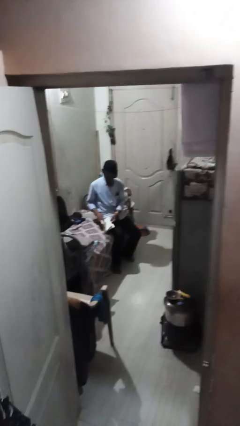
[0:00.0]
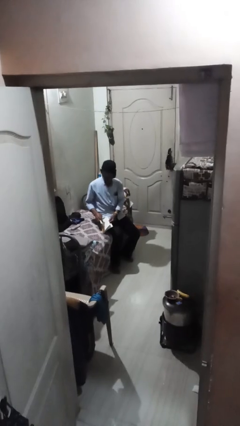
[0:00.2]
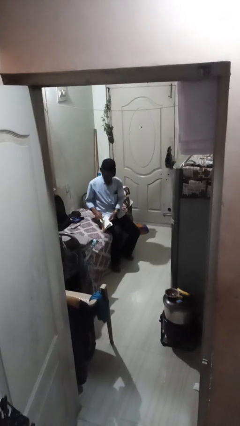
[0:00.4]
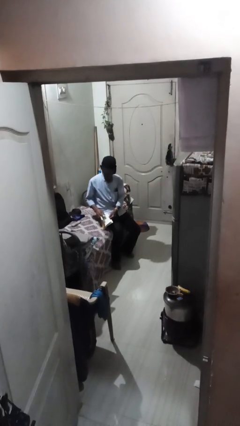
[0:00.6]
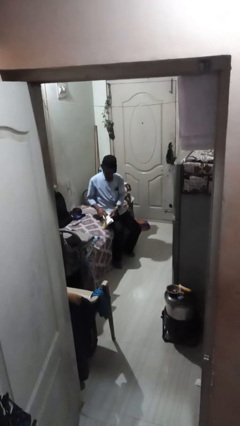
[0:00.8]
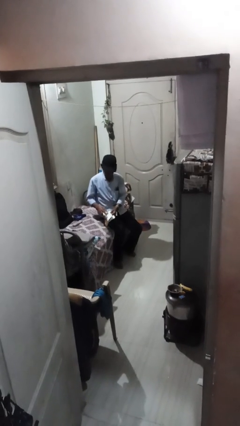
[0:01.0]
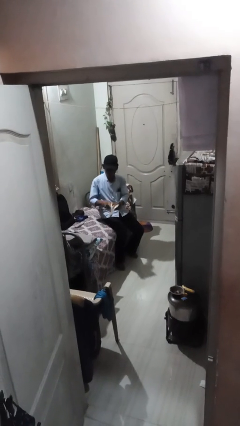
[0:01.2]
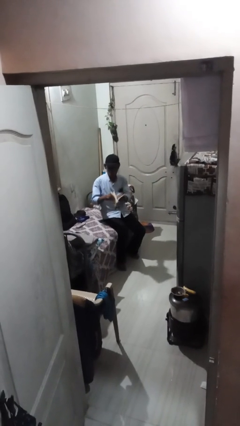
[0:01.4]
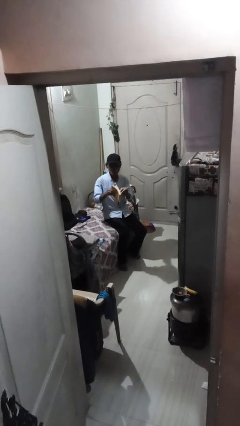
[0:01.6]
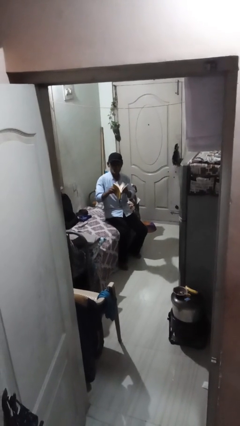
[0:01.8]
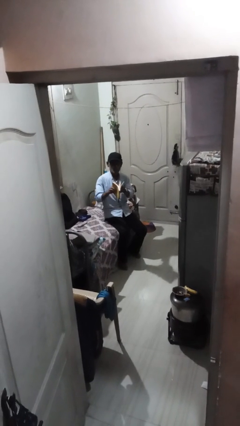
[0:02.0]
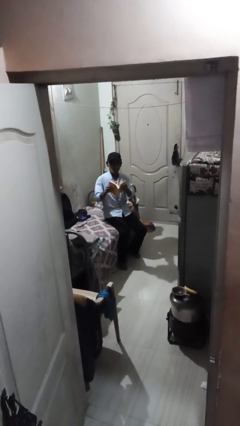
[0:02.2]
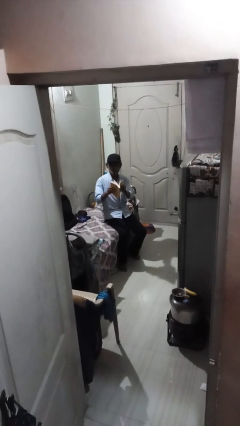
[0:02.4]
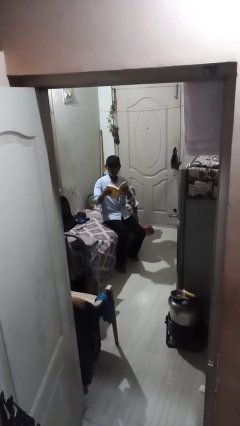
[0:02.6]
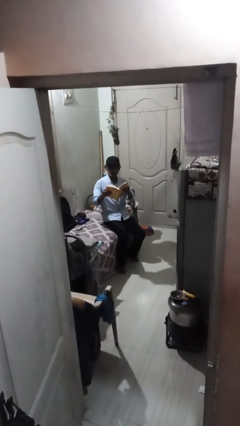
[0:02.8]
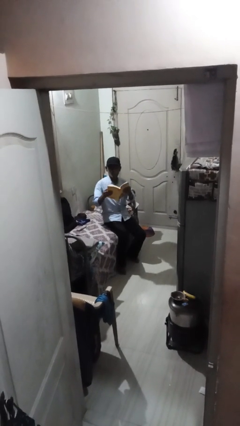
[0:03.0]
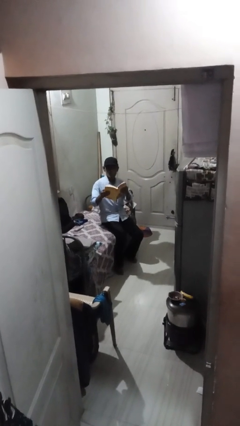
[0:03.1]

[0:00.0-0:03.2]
person reads book

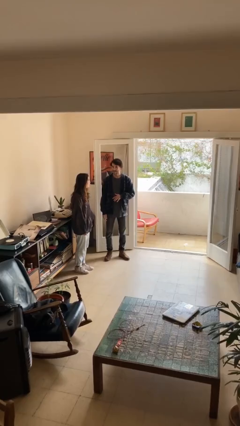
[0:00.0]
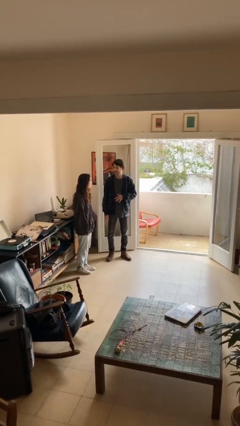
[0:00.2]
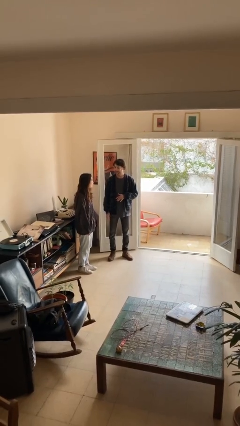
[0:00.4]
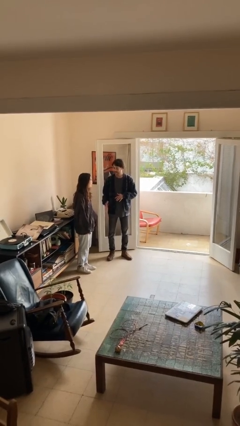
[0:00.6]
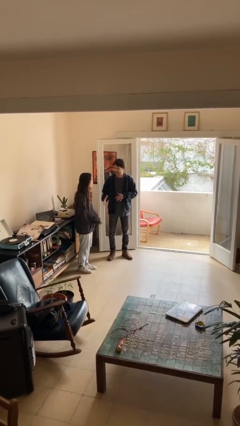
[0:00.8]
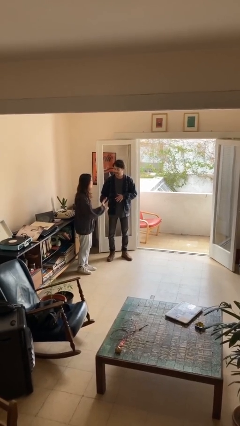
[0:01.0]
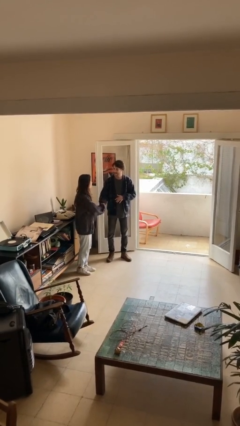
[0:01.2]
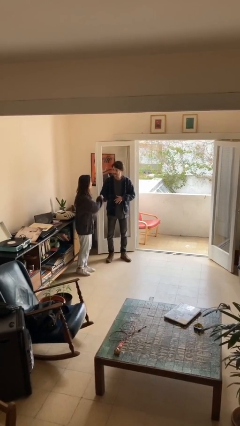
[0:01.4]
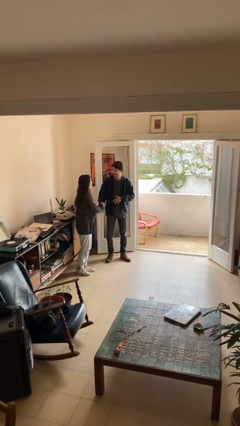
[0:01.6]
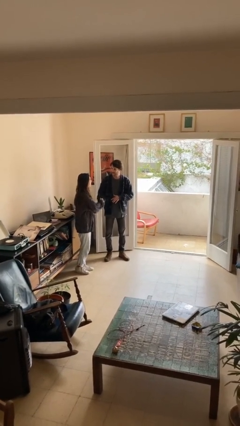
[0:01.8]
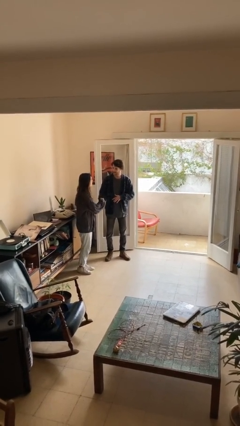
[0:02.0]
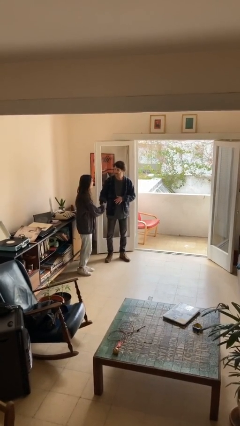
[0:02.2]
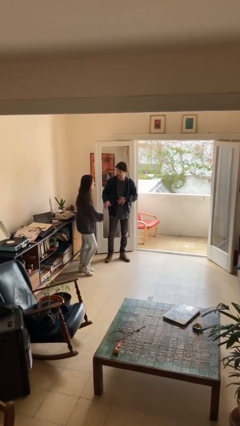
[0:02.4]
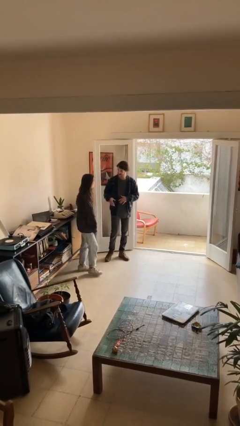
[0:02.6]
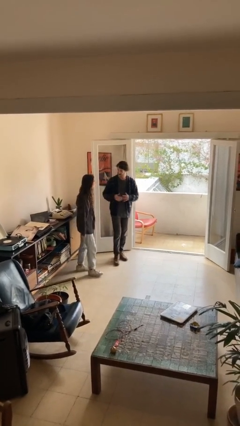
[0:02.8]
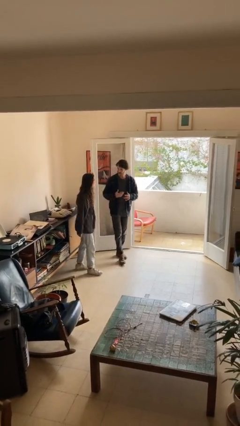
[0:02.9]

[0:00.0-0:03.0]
person shakes hand

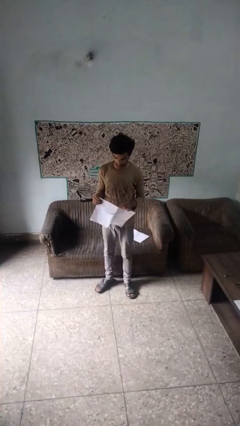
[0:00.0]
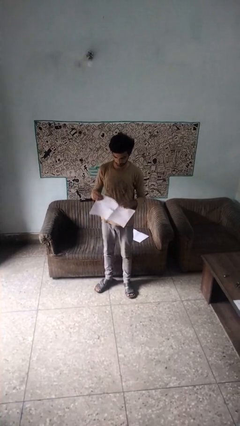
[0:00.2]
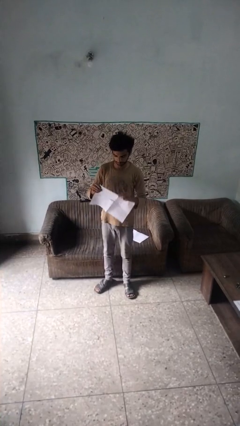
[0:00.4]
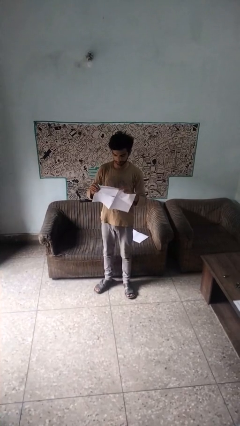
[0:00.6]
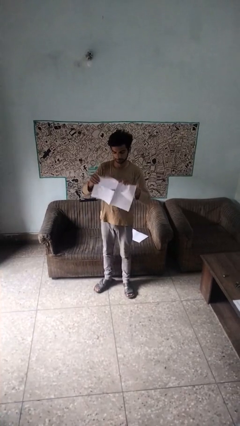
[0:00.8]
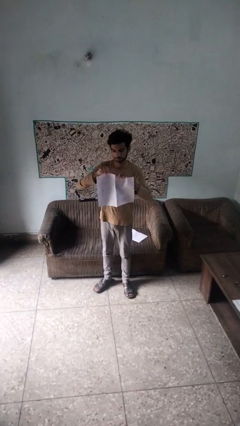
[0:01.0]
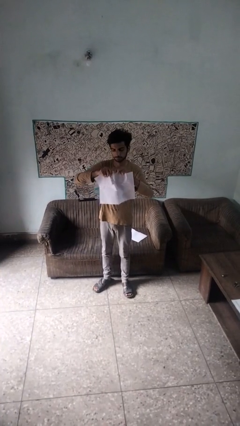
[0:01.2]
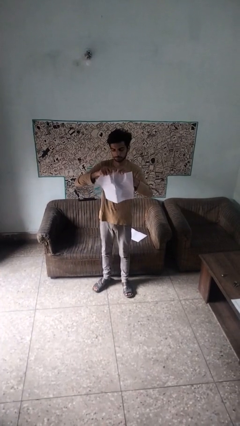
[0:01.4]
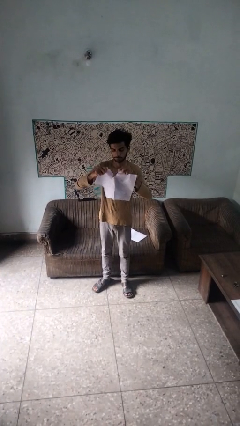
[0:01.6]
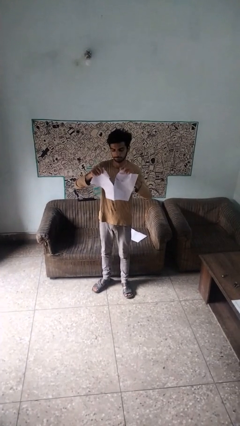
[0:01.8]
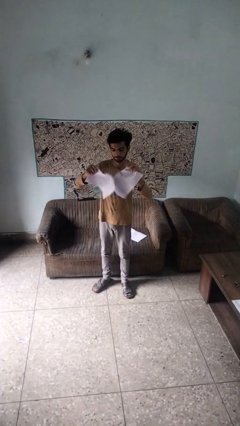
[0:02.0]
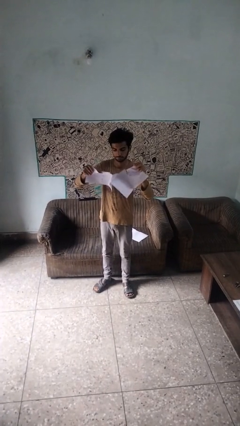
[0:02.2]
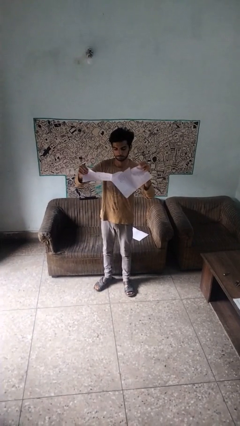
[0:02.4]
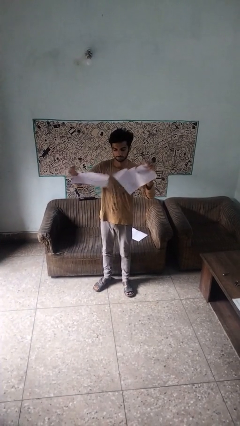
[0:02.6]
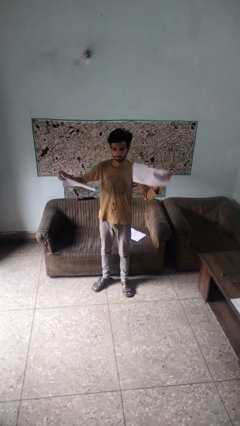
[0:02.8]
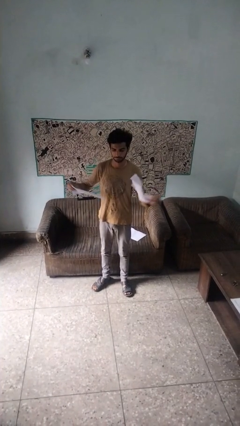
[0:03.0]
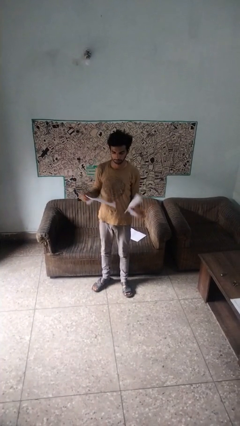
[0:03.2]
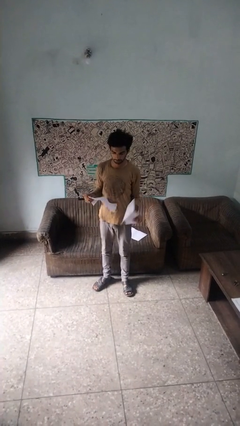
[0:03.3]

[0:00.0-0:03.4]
person tears paper

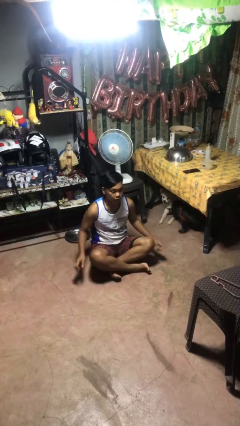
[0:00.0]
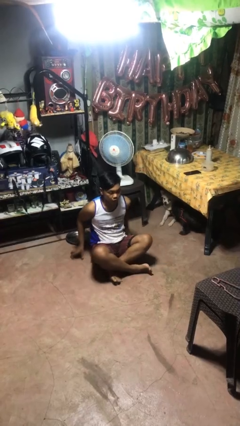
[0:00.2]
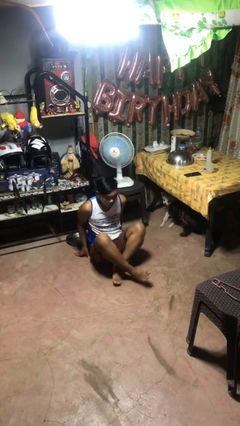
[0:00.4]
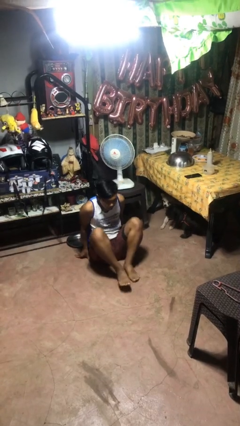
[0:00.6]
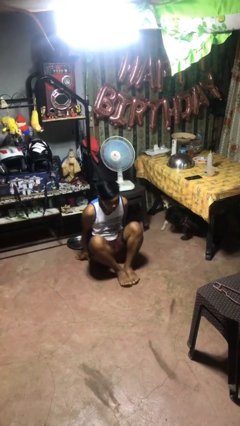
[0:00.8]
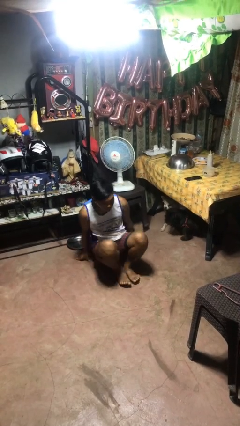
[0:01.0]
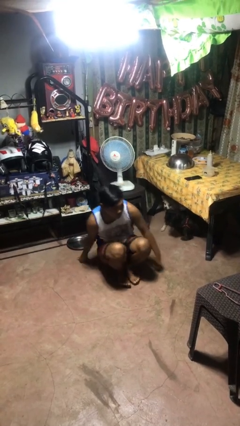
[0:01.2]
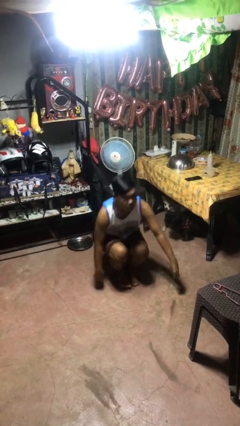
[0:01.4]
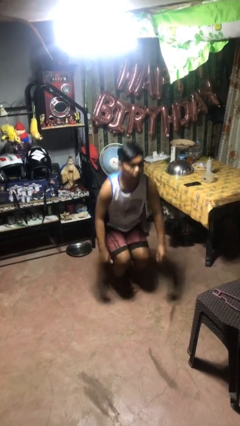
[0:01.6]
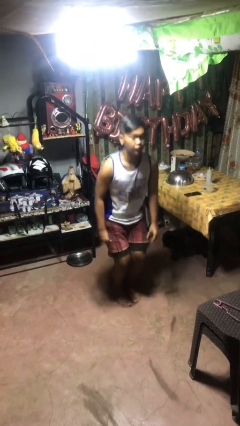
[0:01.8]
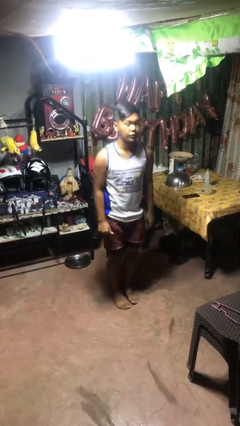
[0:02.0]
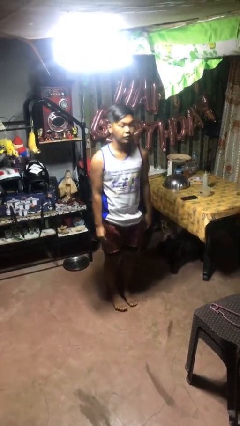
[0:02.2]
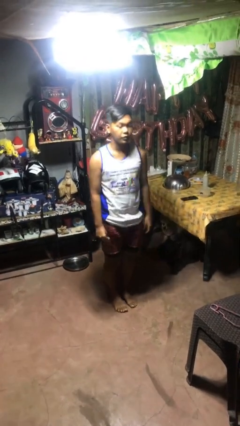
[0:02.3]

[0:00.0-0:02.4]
person stands up from floor

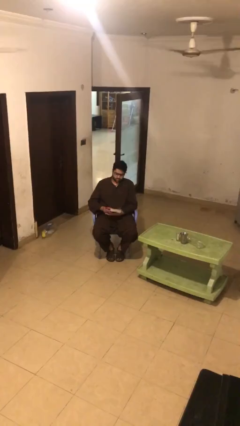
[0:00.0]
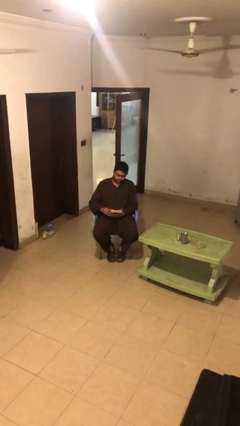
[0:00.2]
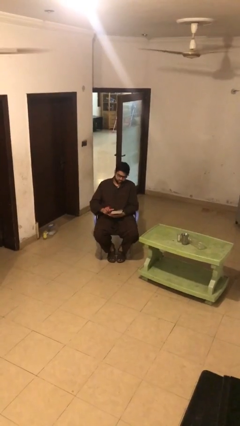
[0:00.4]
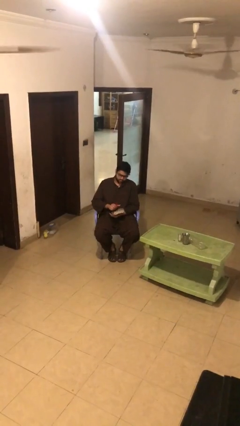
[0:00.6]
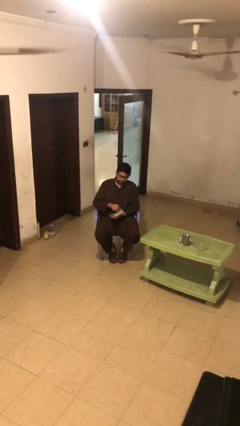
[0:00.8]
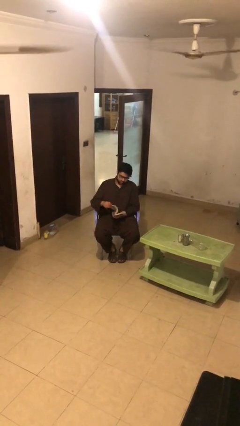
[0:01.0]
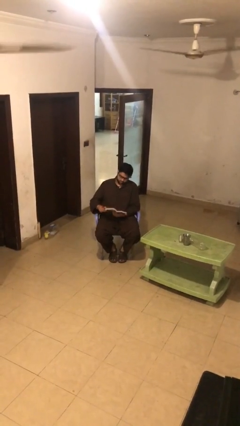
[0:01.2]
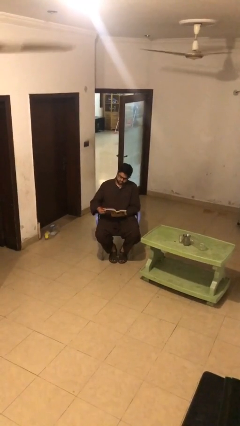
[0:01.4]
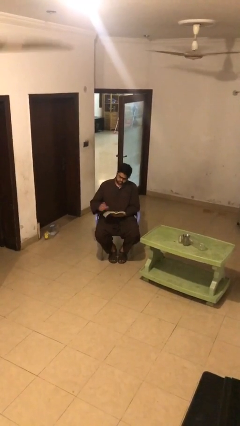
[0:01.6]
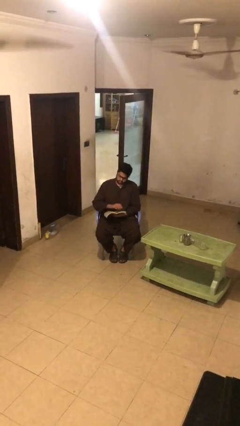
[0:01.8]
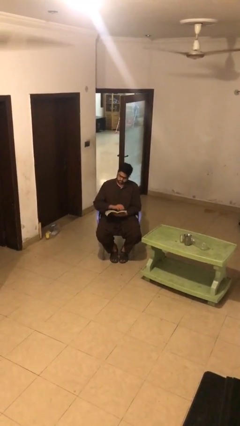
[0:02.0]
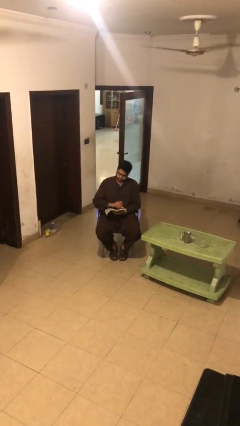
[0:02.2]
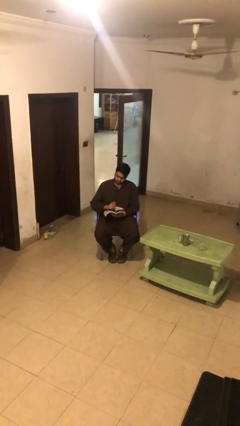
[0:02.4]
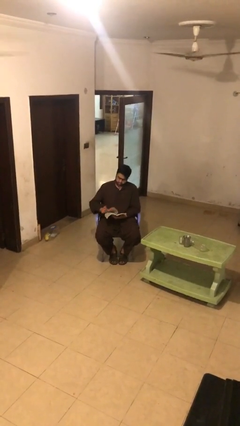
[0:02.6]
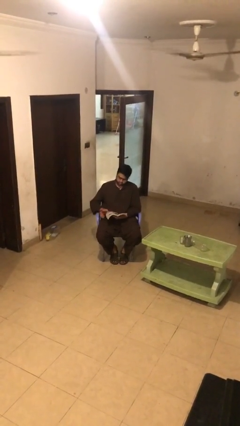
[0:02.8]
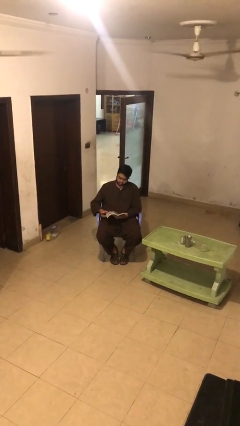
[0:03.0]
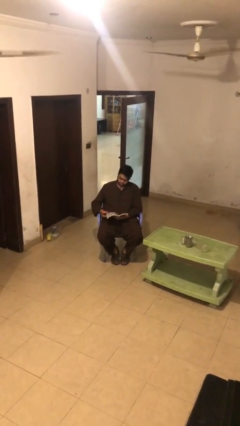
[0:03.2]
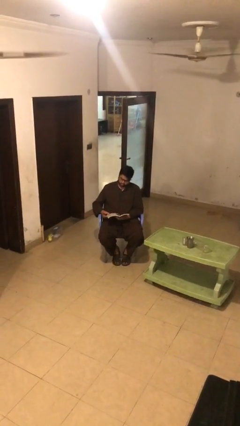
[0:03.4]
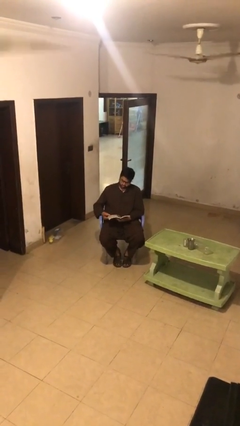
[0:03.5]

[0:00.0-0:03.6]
person reads document

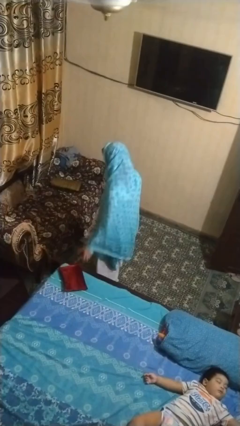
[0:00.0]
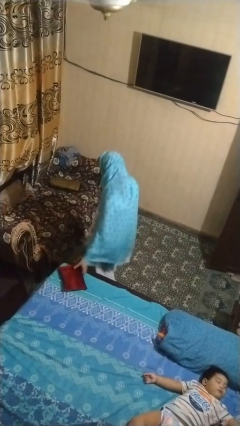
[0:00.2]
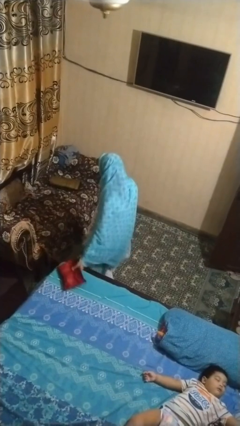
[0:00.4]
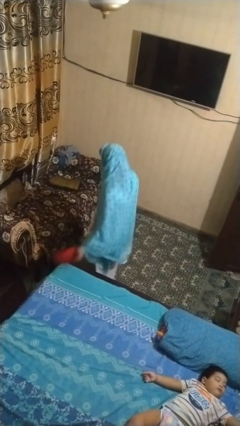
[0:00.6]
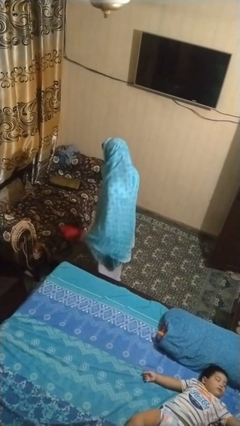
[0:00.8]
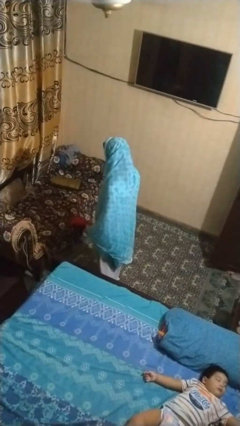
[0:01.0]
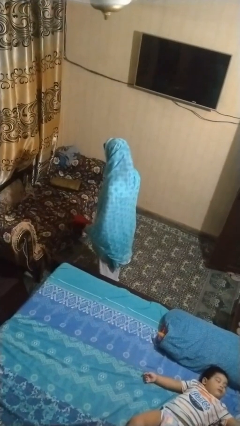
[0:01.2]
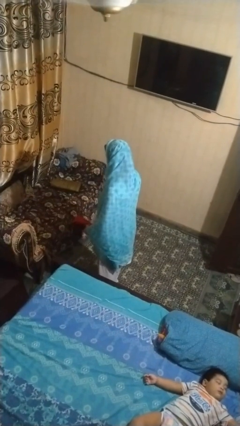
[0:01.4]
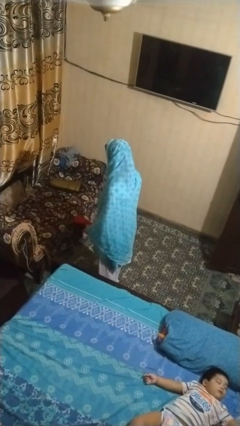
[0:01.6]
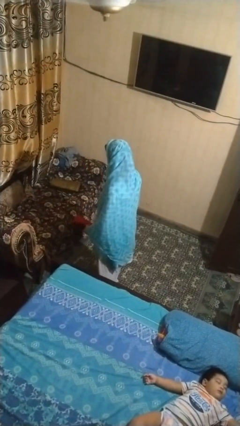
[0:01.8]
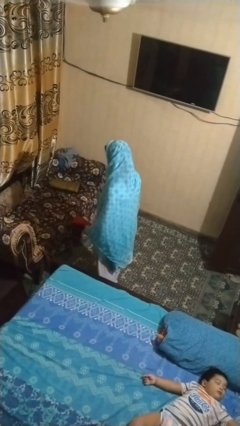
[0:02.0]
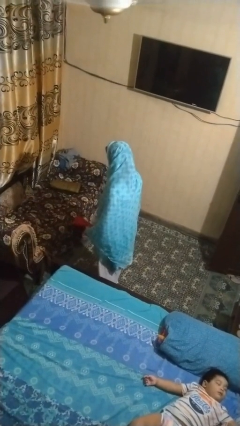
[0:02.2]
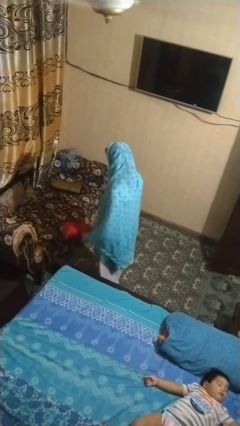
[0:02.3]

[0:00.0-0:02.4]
person picks up object from bed
